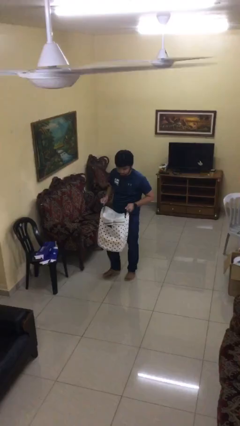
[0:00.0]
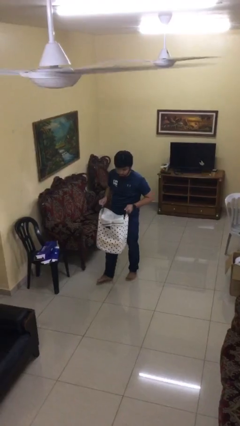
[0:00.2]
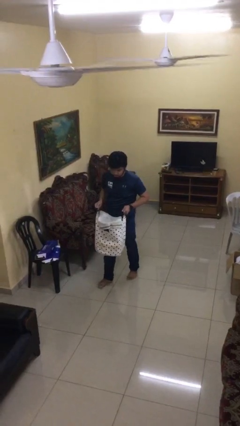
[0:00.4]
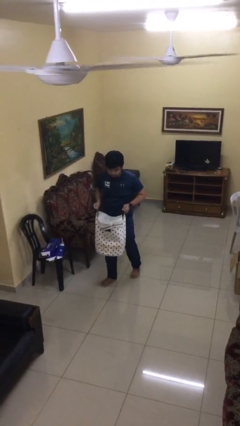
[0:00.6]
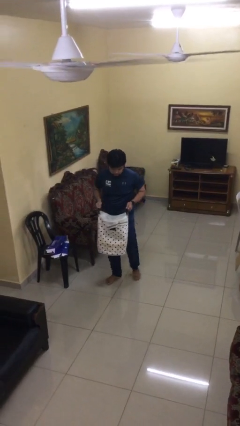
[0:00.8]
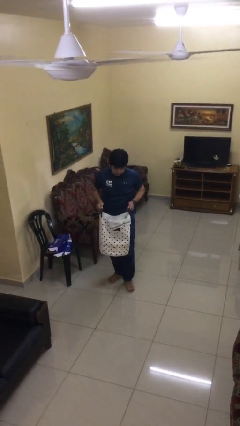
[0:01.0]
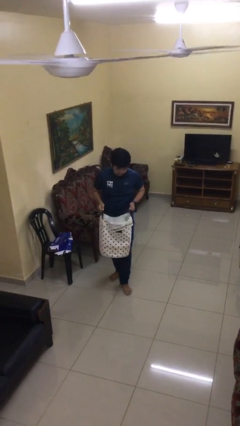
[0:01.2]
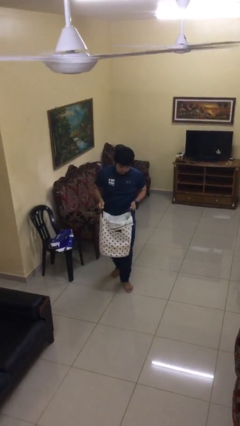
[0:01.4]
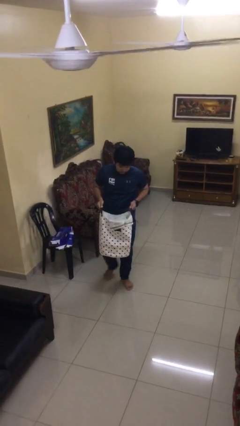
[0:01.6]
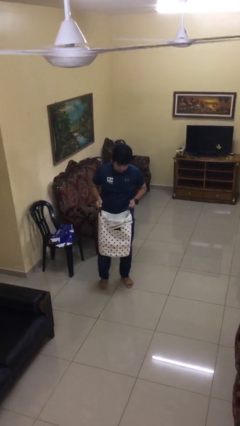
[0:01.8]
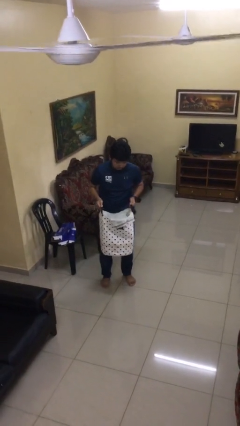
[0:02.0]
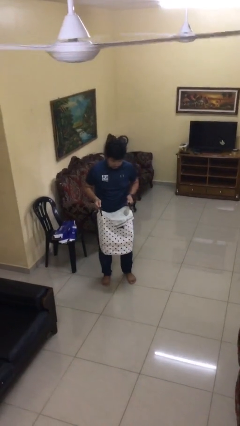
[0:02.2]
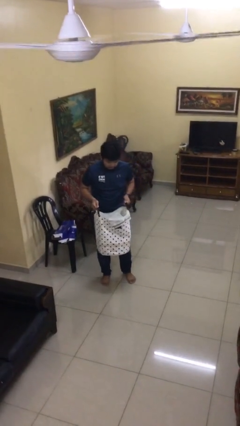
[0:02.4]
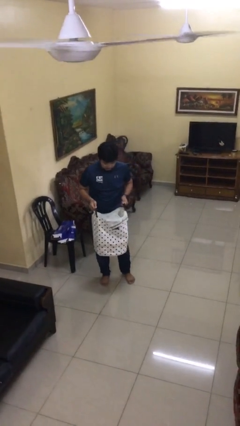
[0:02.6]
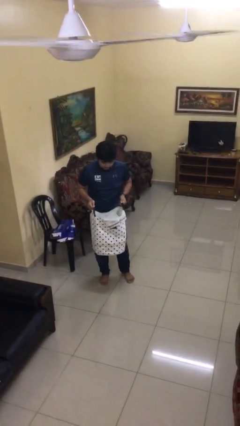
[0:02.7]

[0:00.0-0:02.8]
person carries laundry basket

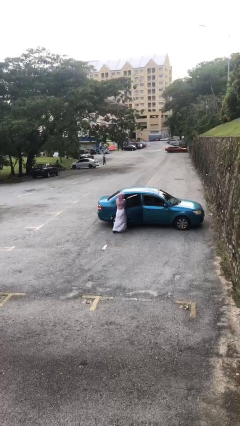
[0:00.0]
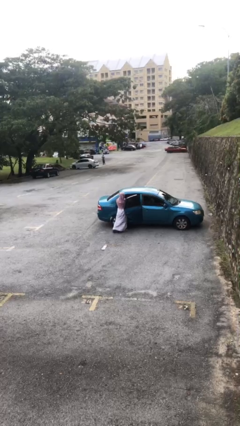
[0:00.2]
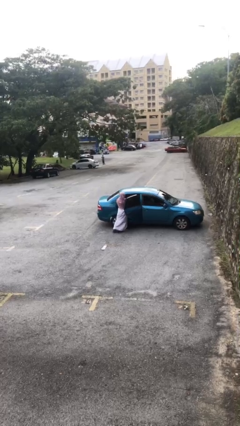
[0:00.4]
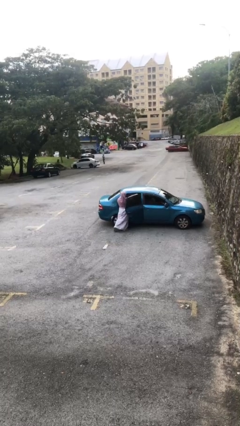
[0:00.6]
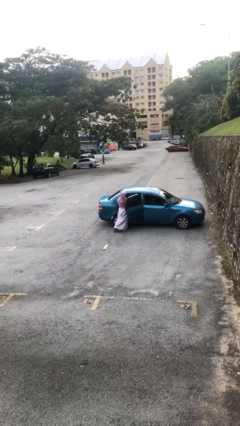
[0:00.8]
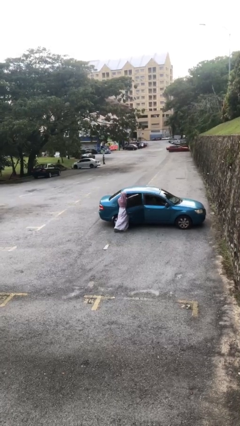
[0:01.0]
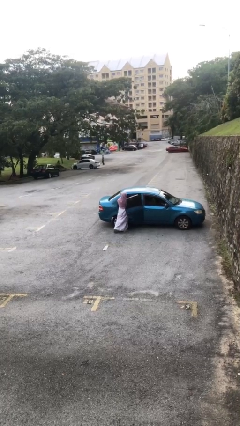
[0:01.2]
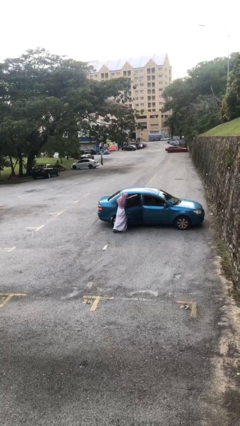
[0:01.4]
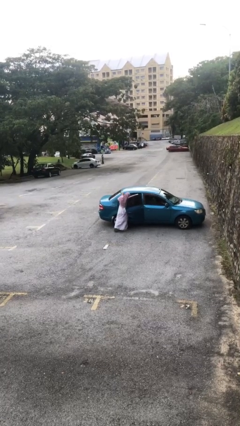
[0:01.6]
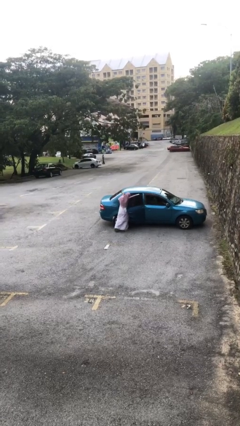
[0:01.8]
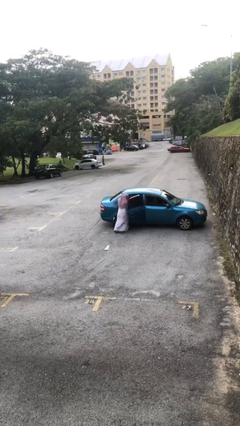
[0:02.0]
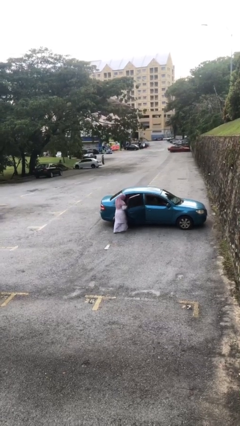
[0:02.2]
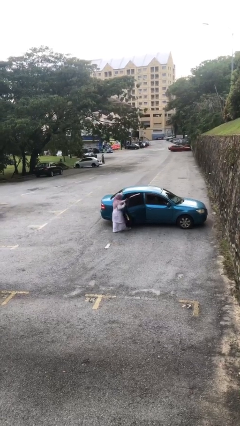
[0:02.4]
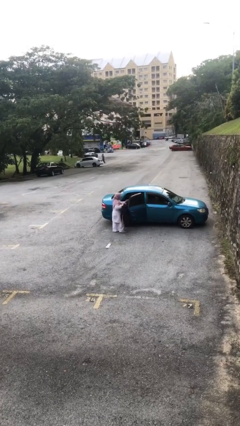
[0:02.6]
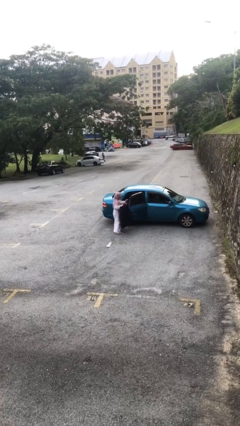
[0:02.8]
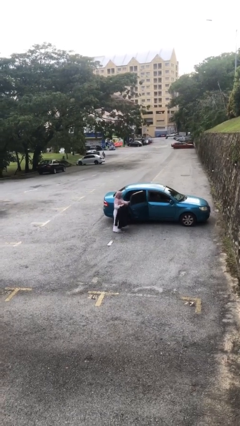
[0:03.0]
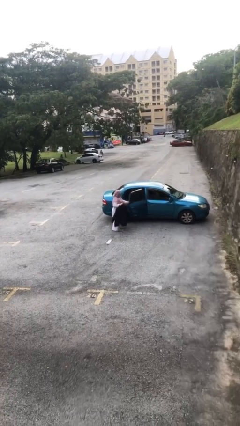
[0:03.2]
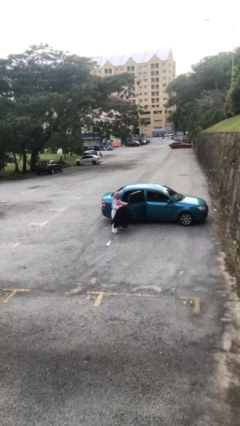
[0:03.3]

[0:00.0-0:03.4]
person unloads car

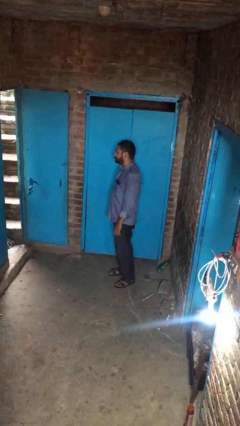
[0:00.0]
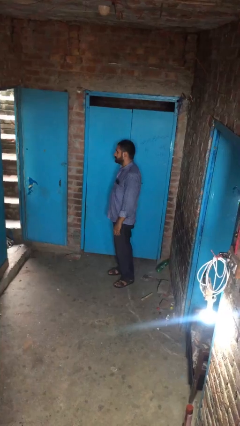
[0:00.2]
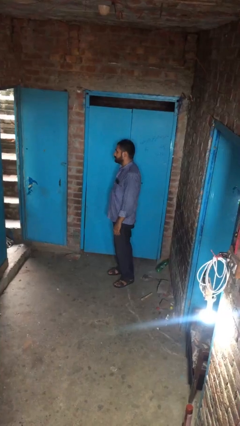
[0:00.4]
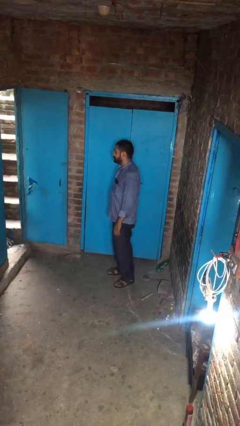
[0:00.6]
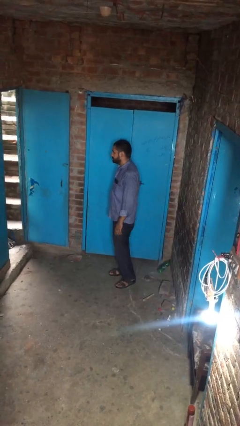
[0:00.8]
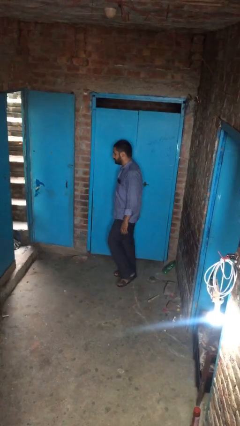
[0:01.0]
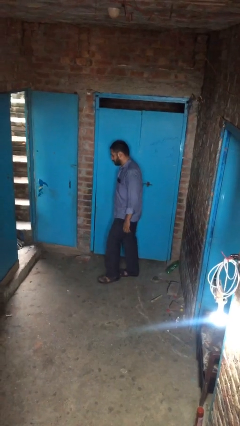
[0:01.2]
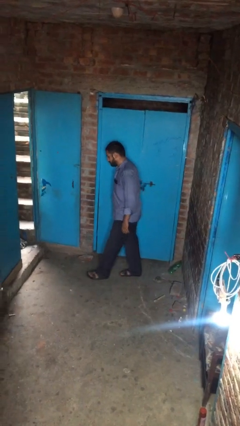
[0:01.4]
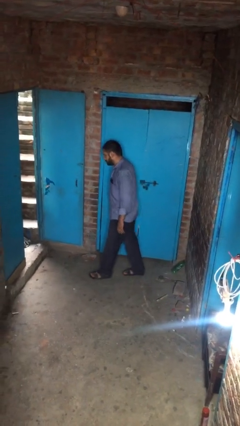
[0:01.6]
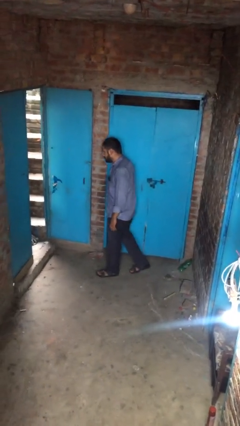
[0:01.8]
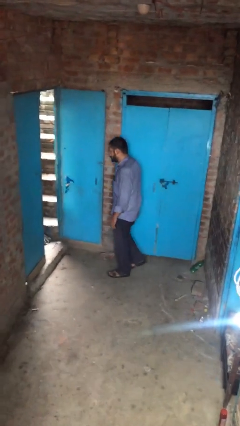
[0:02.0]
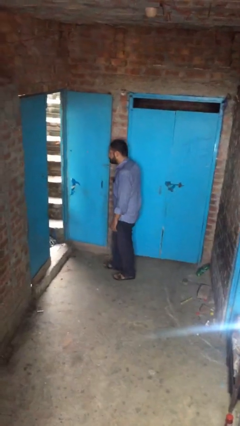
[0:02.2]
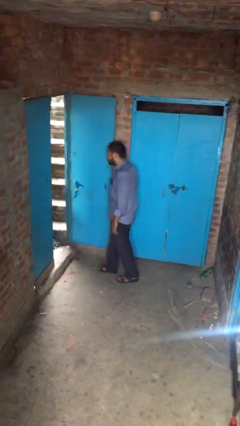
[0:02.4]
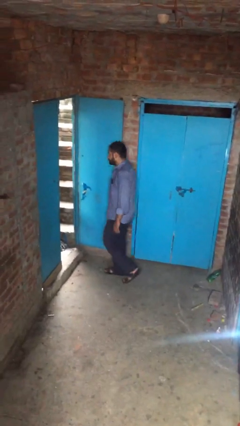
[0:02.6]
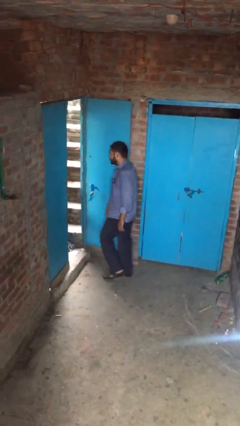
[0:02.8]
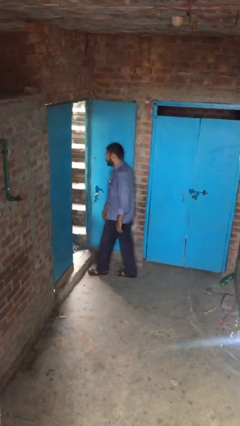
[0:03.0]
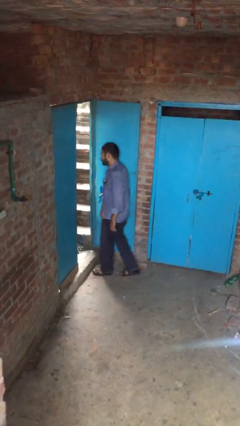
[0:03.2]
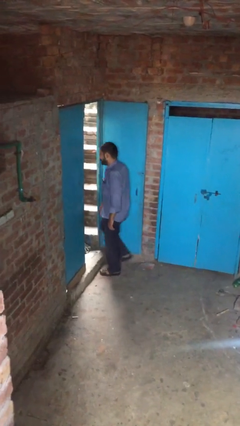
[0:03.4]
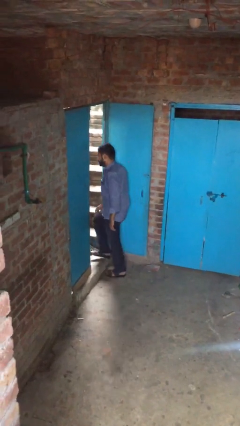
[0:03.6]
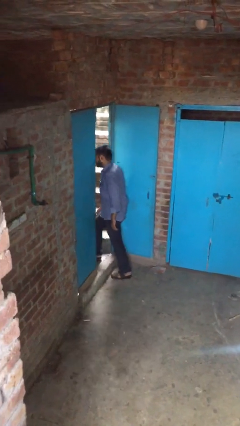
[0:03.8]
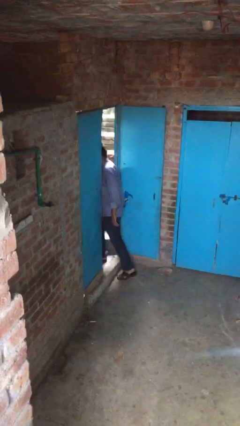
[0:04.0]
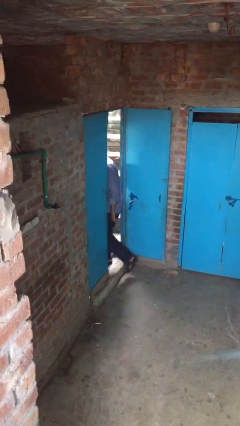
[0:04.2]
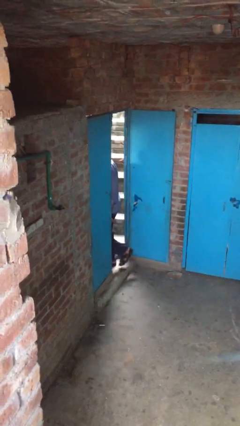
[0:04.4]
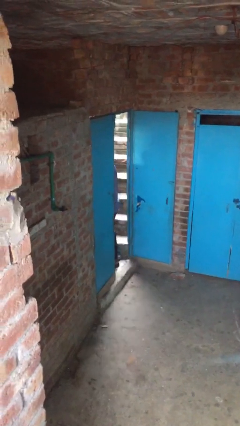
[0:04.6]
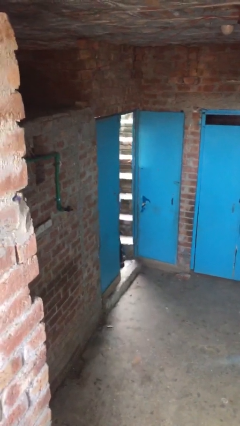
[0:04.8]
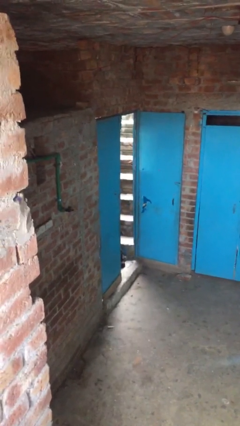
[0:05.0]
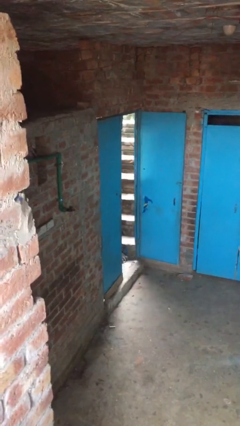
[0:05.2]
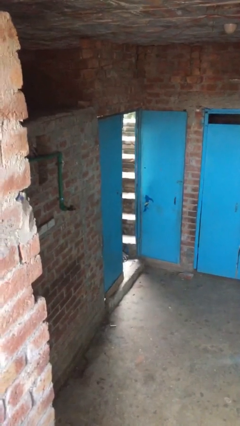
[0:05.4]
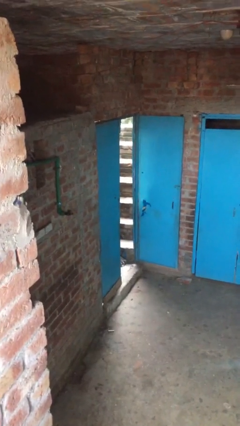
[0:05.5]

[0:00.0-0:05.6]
person exits scene through structure

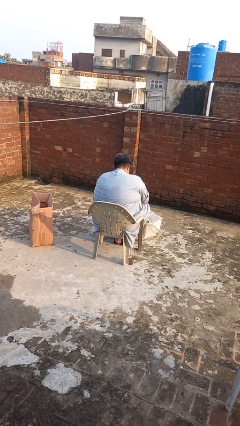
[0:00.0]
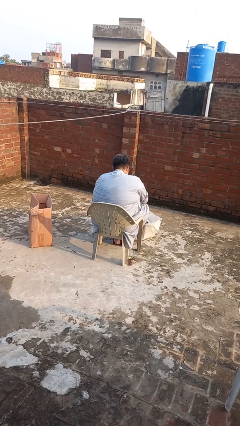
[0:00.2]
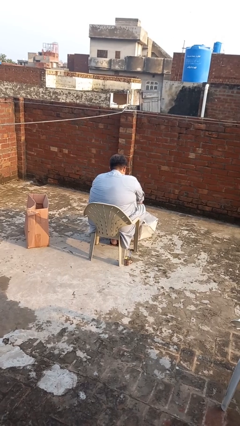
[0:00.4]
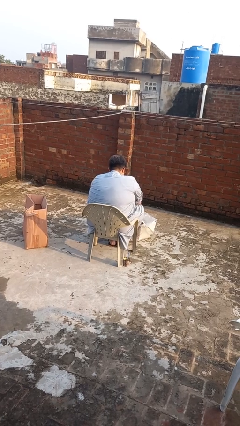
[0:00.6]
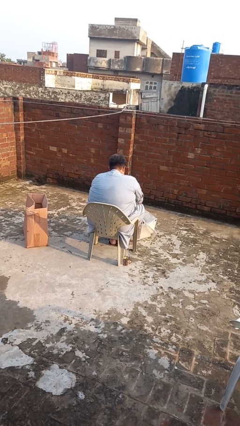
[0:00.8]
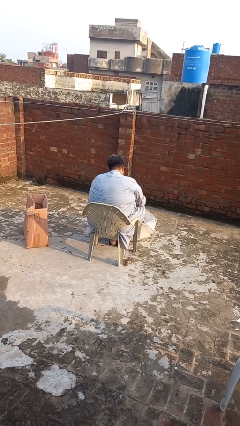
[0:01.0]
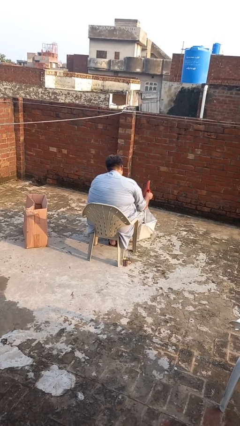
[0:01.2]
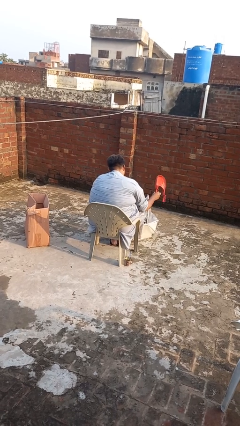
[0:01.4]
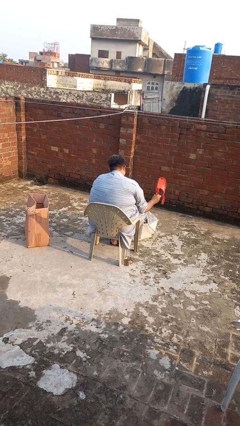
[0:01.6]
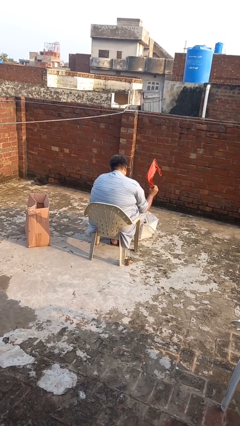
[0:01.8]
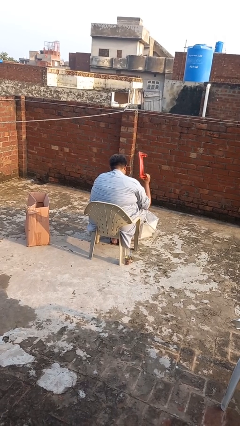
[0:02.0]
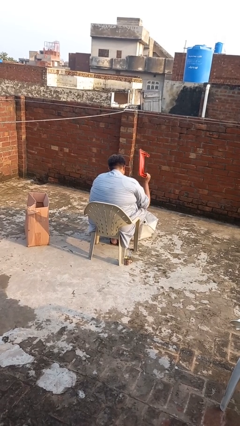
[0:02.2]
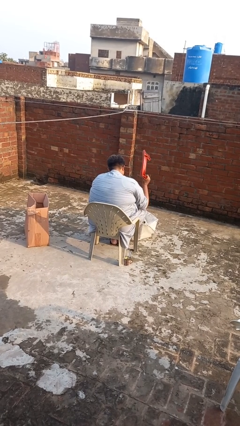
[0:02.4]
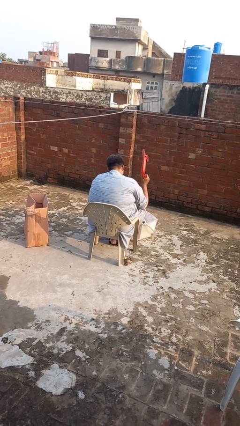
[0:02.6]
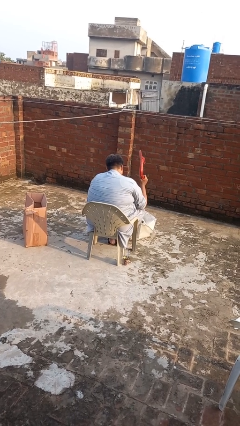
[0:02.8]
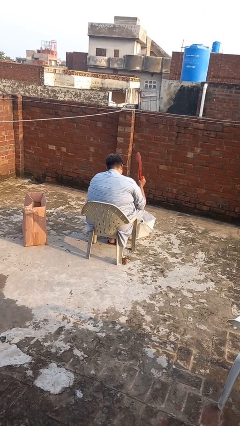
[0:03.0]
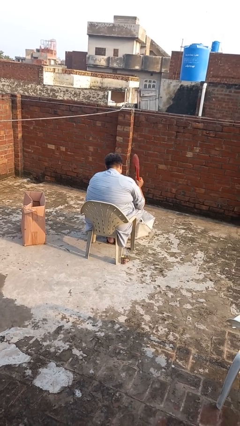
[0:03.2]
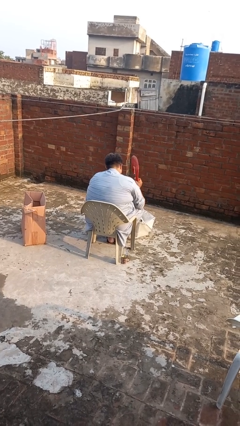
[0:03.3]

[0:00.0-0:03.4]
person searches in bag

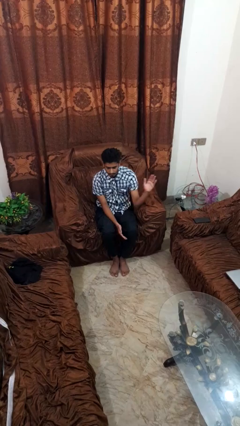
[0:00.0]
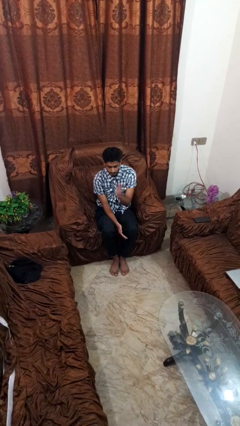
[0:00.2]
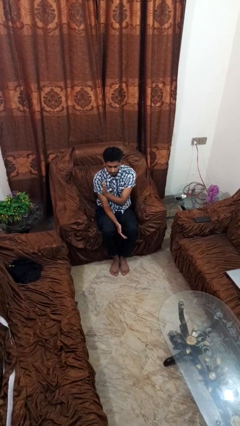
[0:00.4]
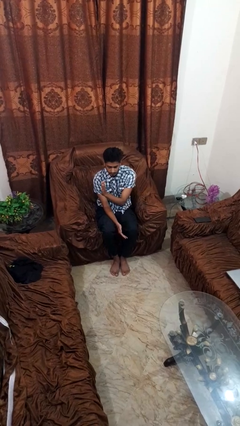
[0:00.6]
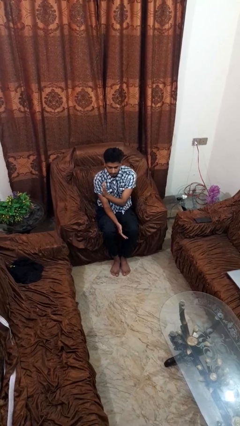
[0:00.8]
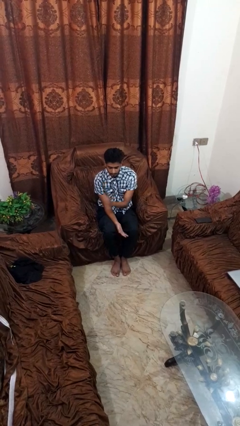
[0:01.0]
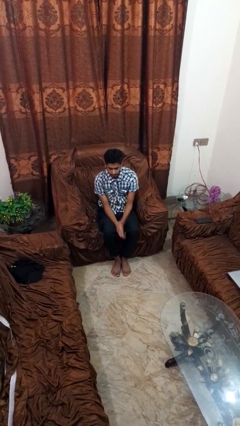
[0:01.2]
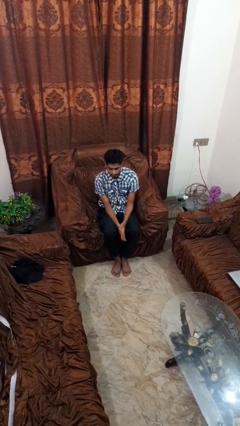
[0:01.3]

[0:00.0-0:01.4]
person gestures swipe right

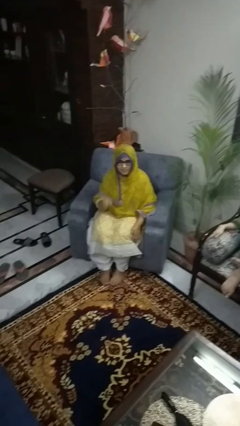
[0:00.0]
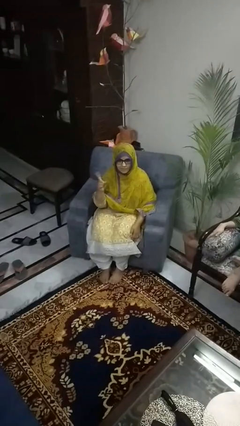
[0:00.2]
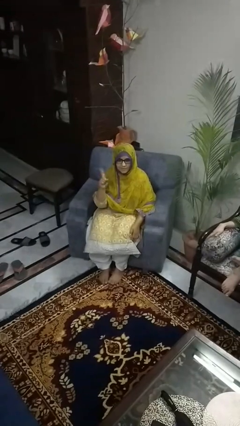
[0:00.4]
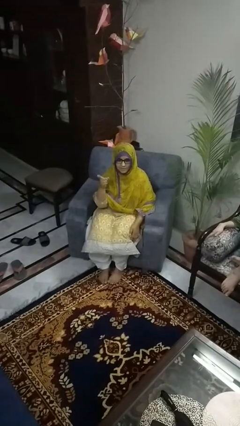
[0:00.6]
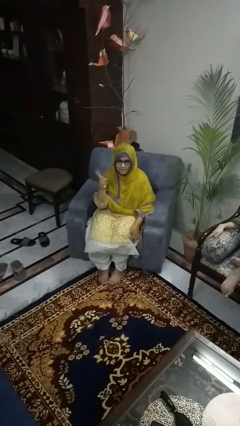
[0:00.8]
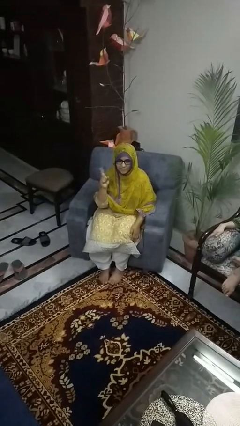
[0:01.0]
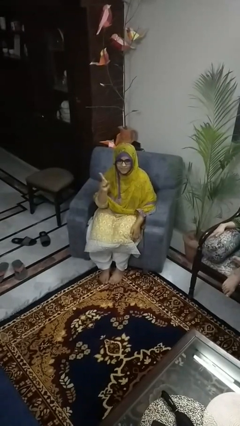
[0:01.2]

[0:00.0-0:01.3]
person gestures number one
